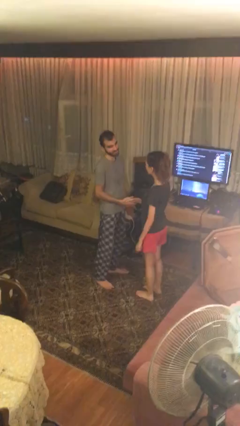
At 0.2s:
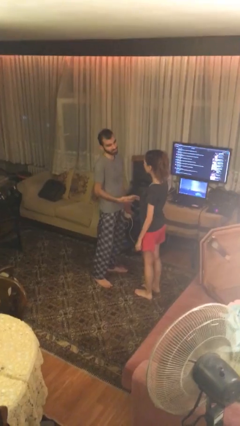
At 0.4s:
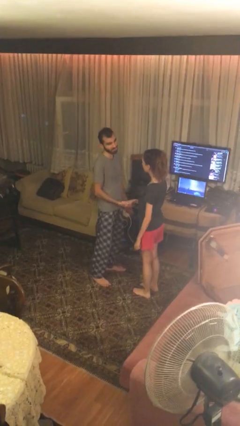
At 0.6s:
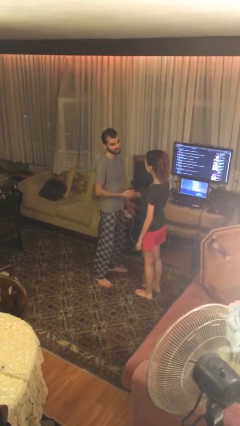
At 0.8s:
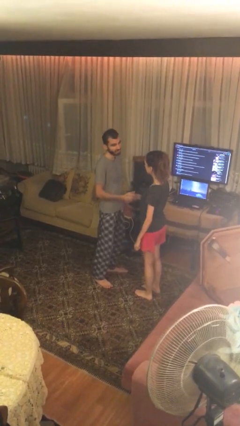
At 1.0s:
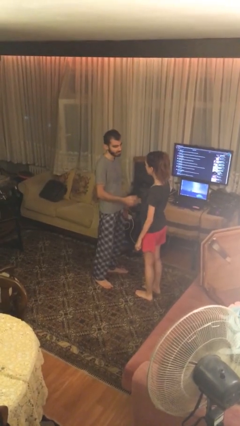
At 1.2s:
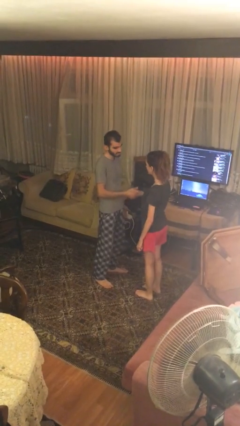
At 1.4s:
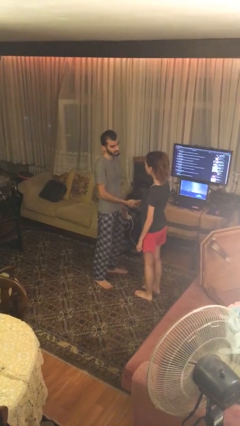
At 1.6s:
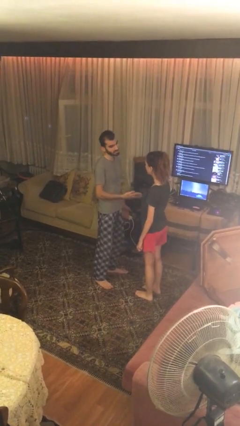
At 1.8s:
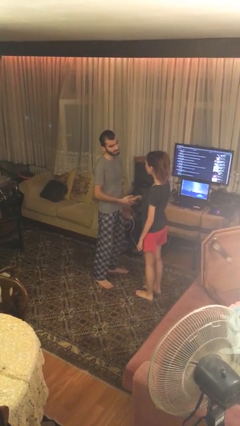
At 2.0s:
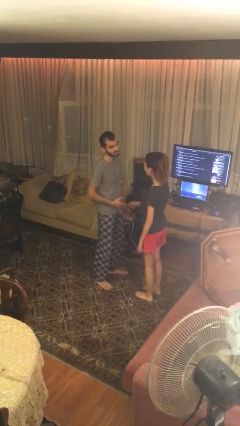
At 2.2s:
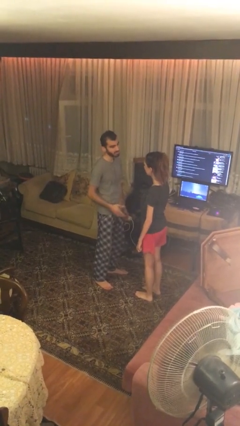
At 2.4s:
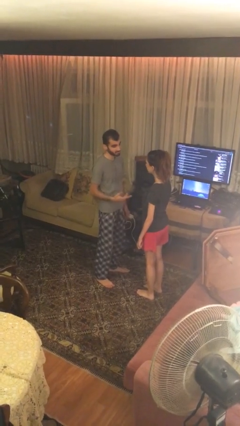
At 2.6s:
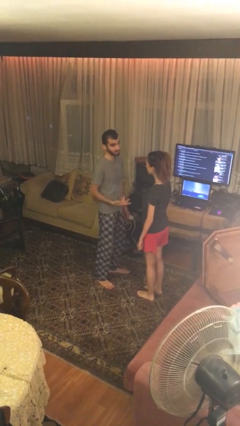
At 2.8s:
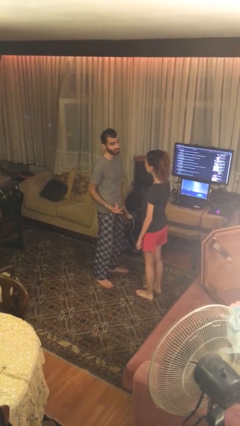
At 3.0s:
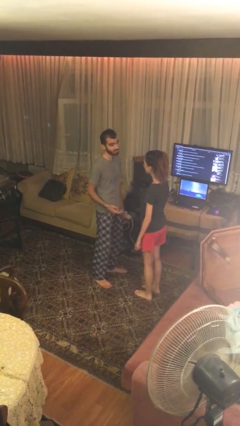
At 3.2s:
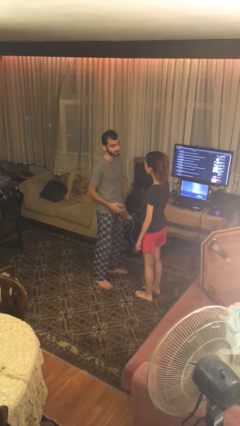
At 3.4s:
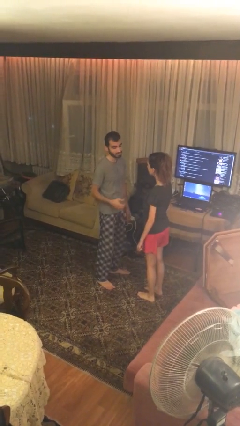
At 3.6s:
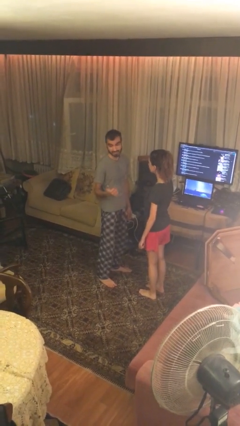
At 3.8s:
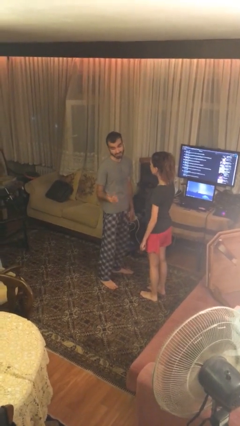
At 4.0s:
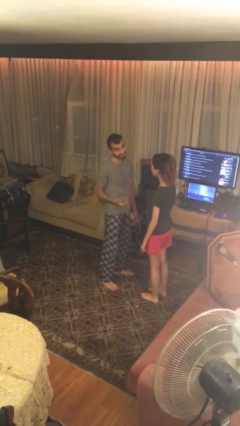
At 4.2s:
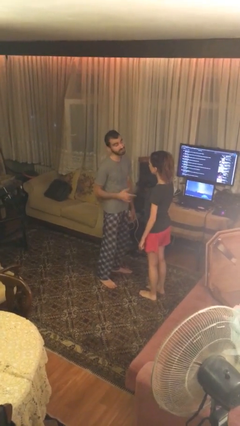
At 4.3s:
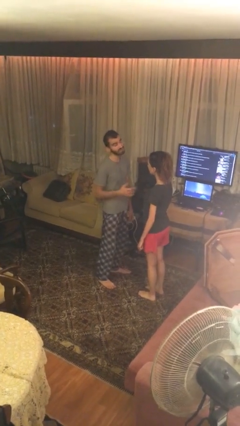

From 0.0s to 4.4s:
person talks to person

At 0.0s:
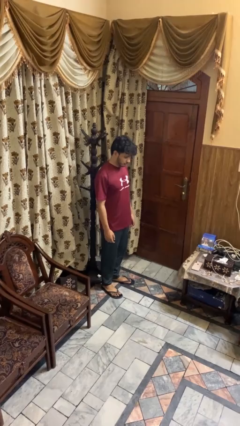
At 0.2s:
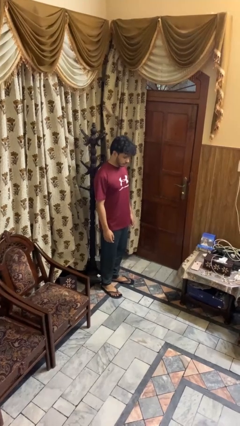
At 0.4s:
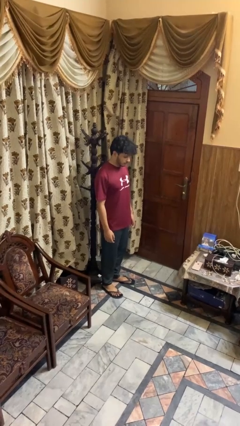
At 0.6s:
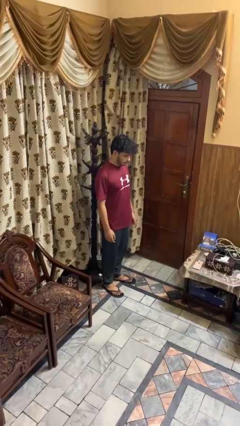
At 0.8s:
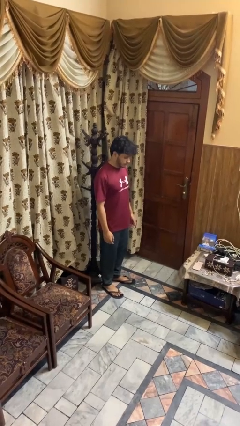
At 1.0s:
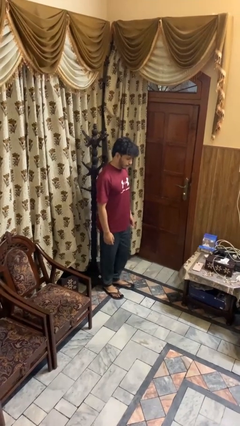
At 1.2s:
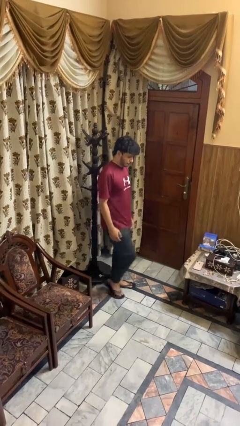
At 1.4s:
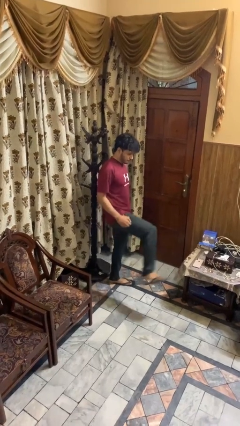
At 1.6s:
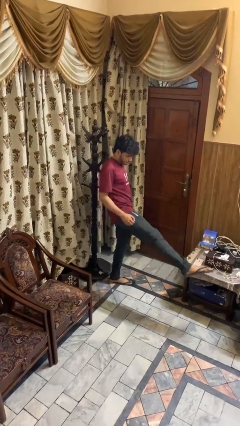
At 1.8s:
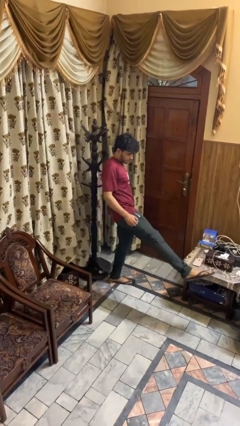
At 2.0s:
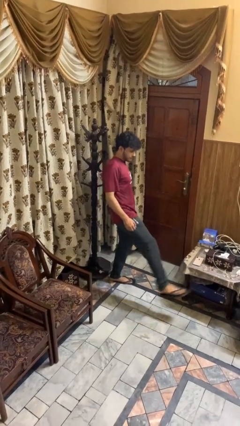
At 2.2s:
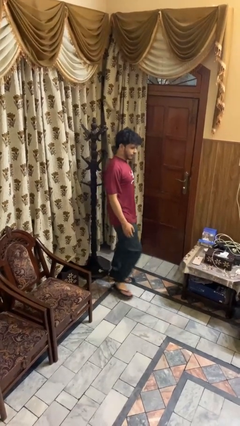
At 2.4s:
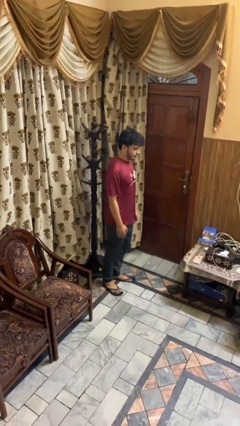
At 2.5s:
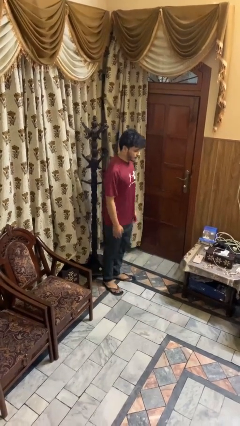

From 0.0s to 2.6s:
person karate kicks

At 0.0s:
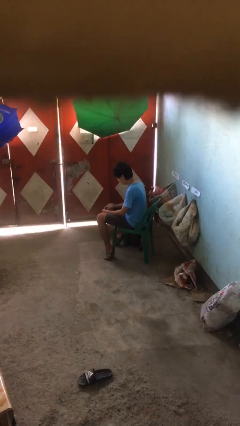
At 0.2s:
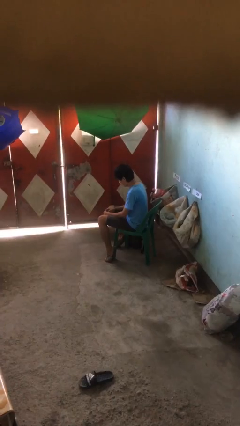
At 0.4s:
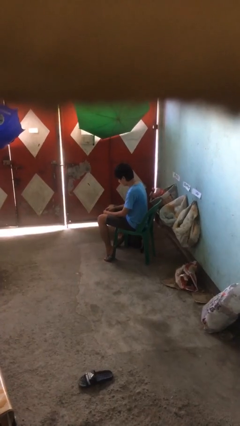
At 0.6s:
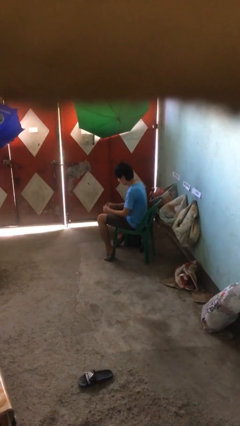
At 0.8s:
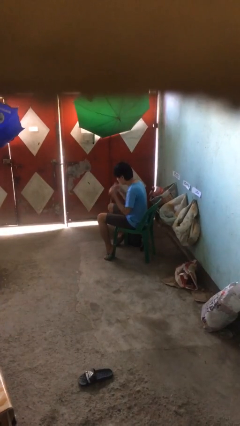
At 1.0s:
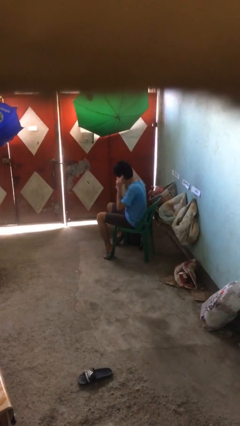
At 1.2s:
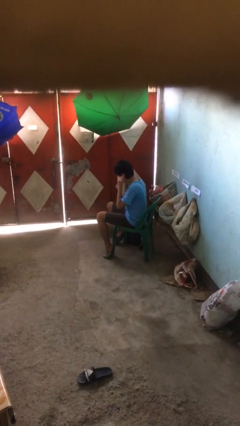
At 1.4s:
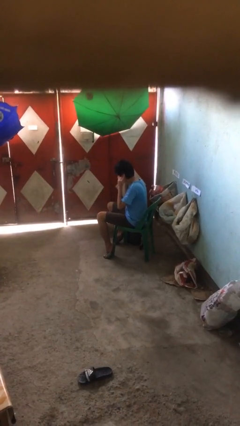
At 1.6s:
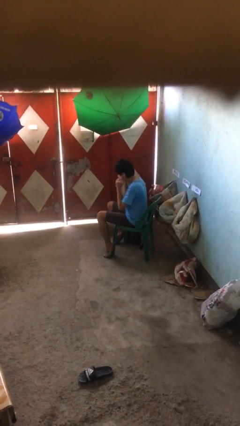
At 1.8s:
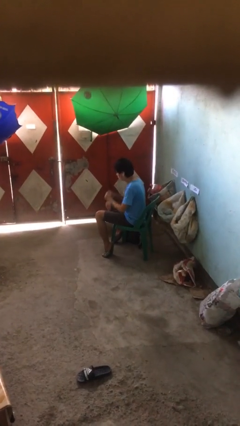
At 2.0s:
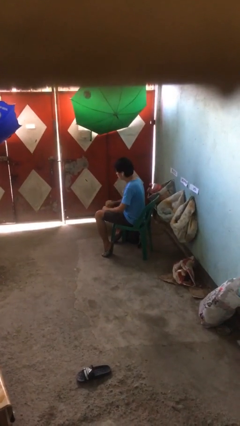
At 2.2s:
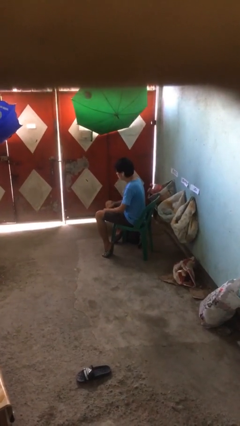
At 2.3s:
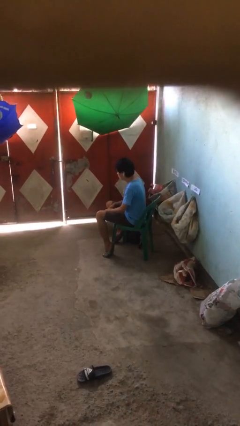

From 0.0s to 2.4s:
person puts on headphones

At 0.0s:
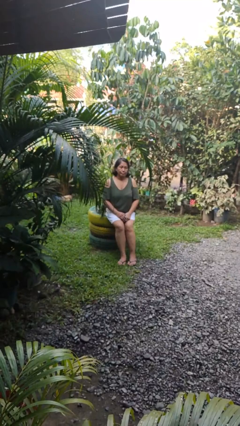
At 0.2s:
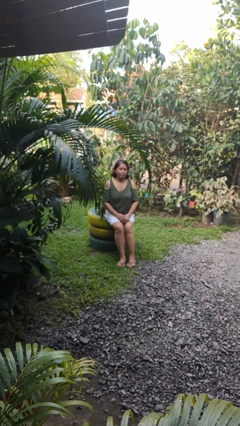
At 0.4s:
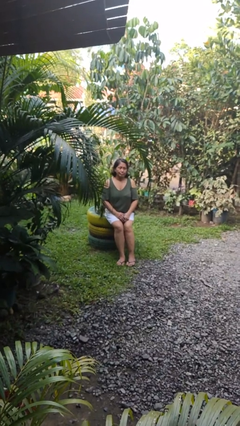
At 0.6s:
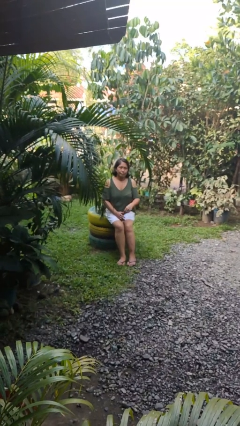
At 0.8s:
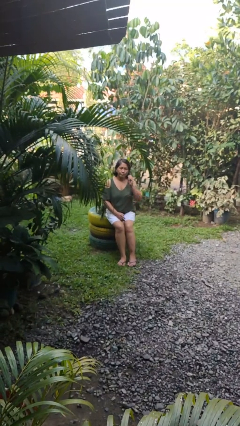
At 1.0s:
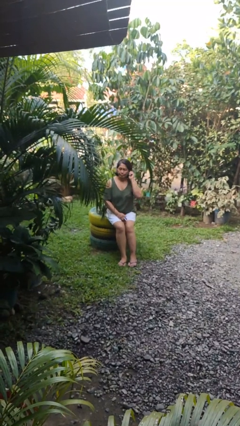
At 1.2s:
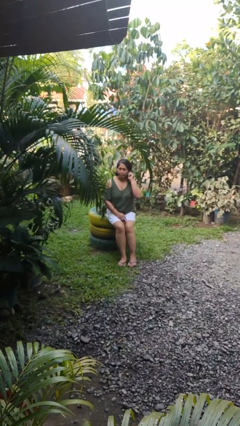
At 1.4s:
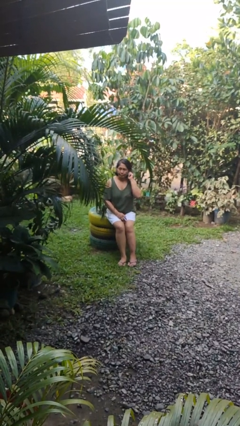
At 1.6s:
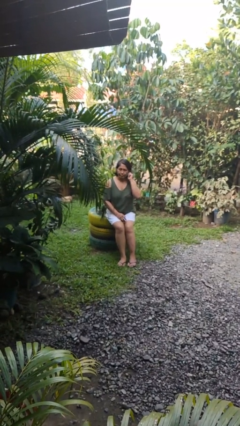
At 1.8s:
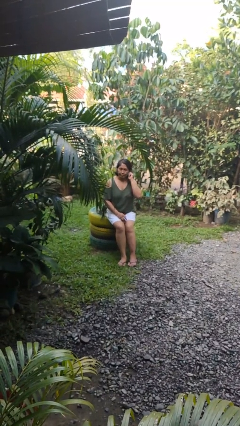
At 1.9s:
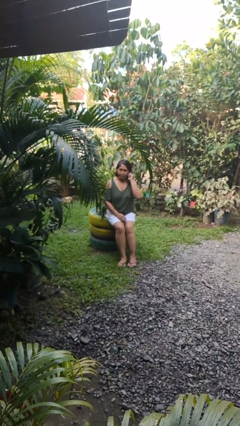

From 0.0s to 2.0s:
person touches earlobe

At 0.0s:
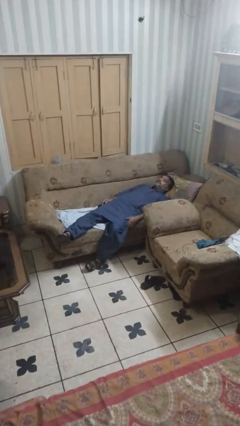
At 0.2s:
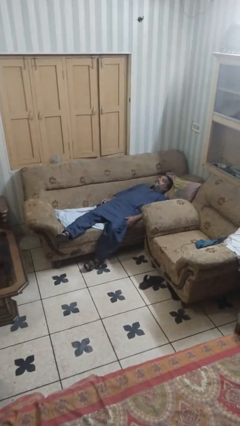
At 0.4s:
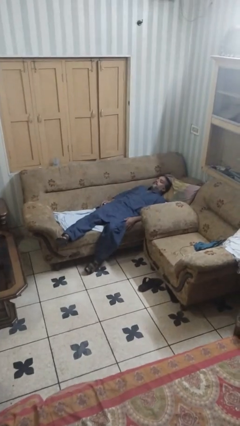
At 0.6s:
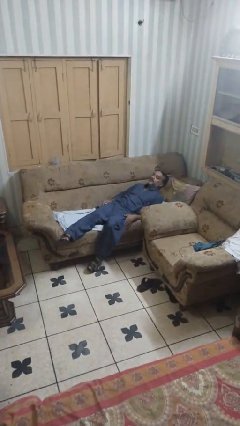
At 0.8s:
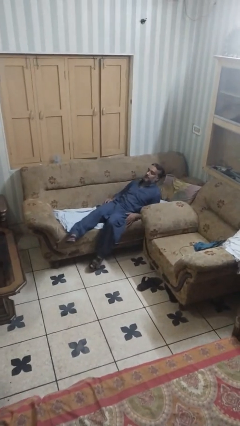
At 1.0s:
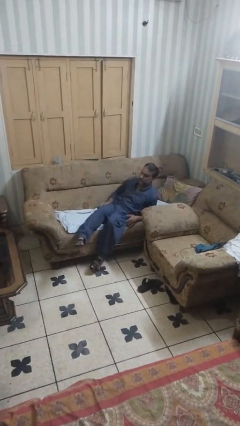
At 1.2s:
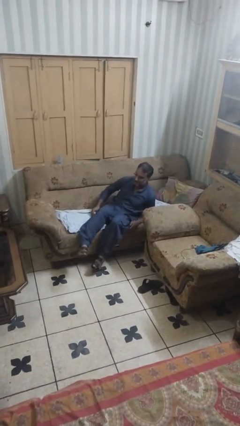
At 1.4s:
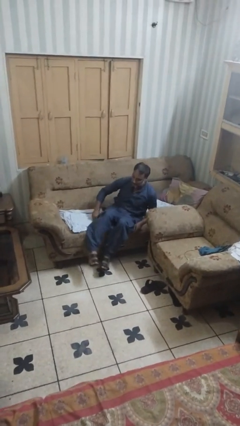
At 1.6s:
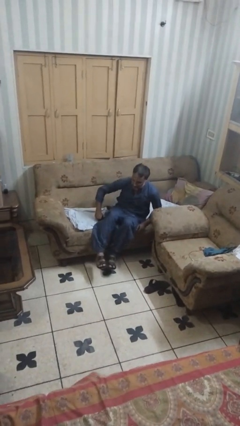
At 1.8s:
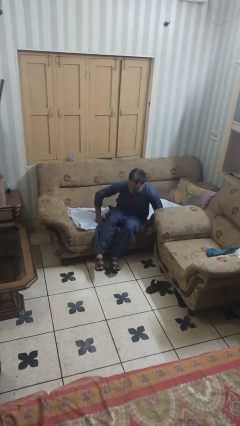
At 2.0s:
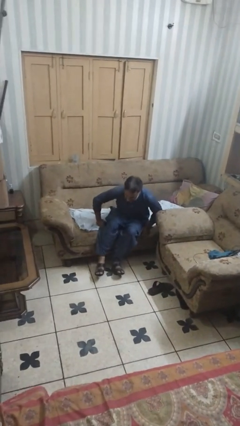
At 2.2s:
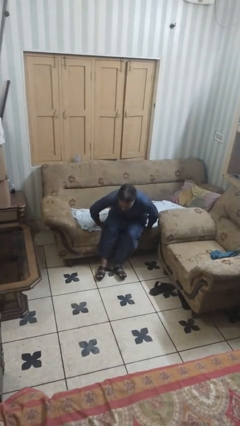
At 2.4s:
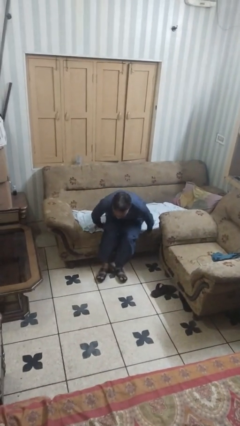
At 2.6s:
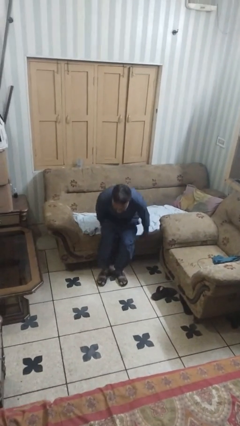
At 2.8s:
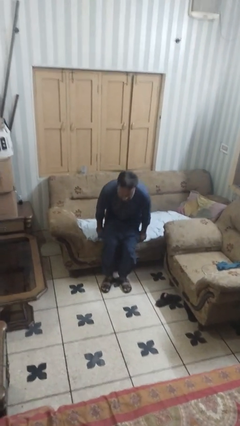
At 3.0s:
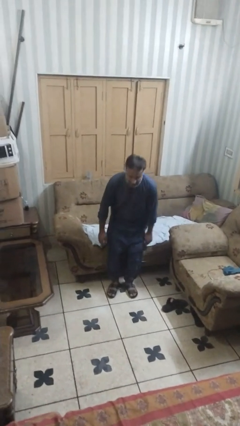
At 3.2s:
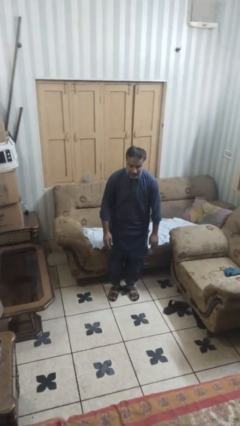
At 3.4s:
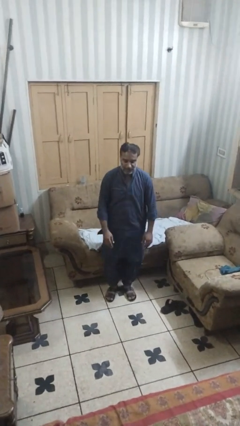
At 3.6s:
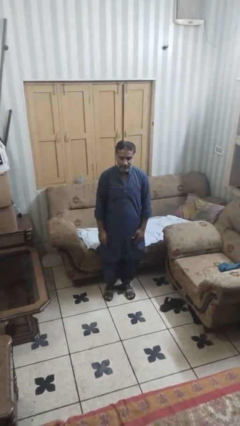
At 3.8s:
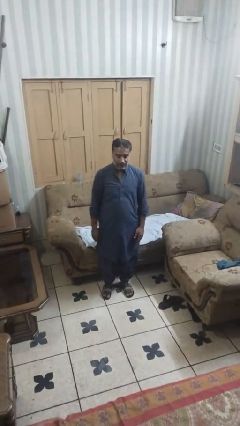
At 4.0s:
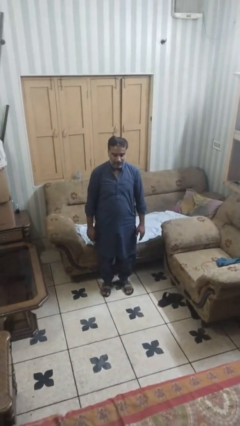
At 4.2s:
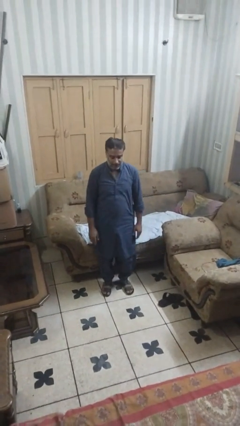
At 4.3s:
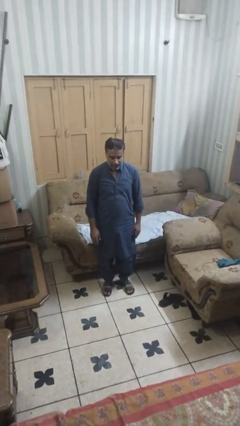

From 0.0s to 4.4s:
person stands up

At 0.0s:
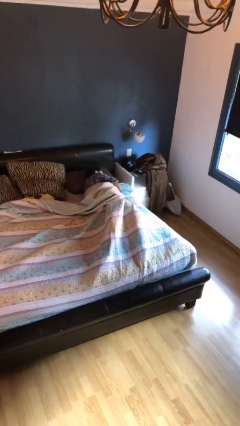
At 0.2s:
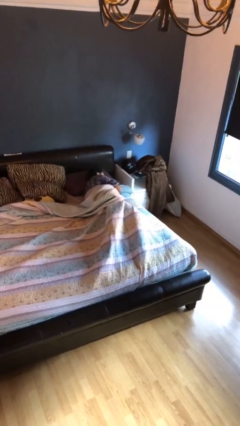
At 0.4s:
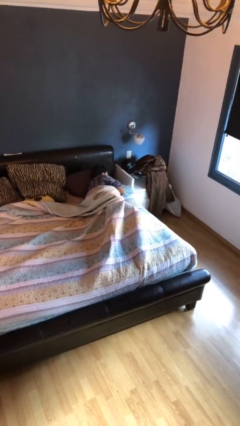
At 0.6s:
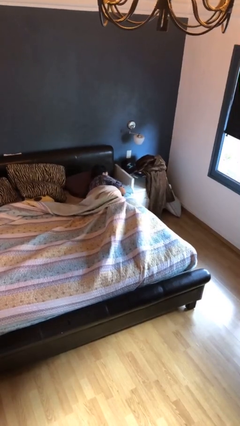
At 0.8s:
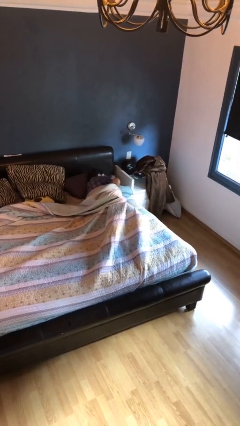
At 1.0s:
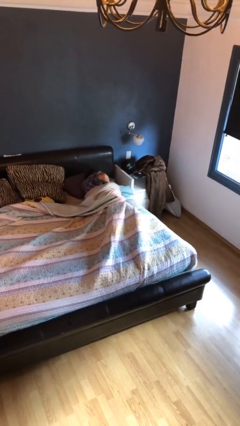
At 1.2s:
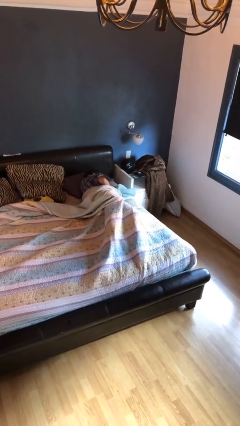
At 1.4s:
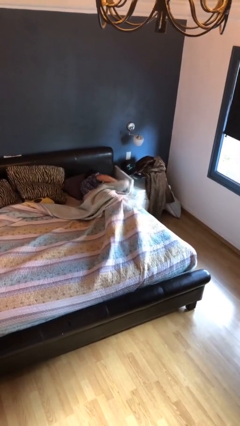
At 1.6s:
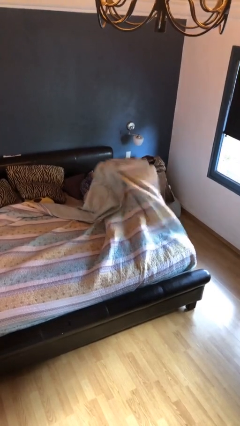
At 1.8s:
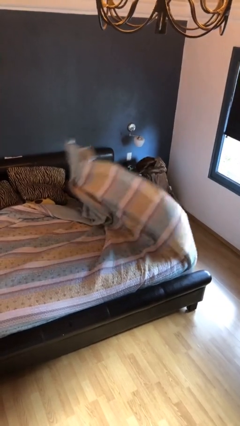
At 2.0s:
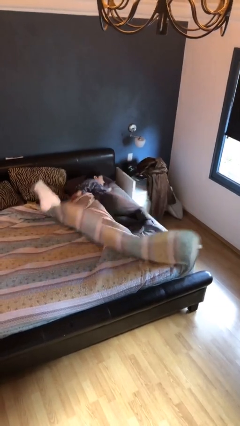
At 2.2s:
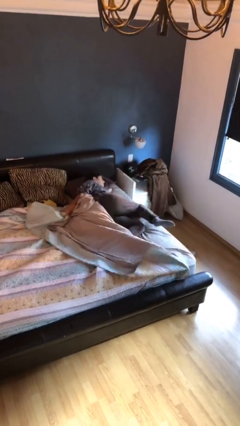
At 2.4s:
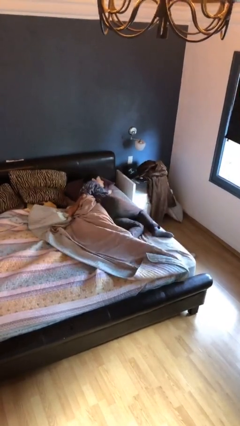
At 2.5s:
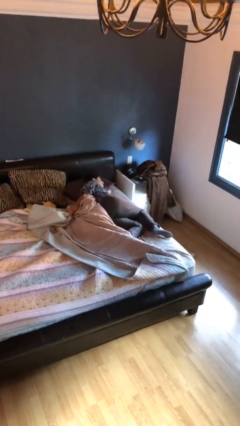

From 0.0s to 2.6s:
person uncovers with bedsheets
